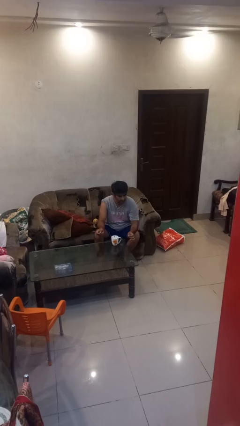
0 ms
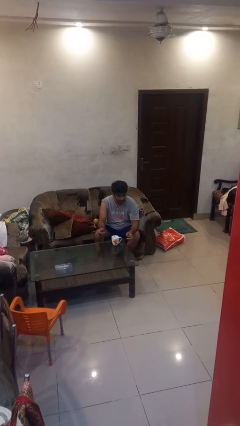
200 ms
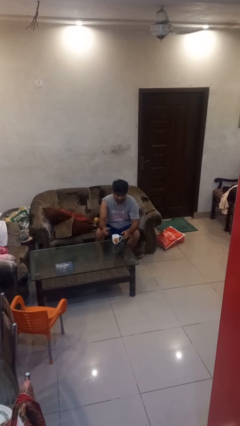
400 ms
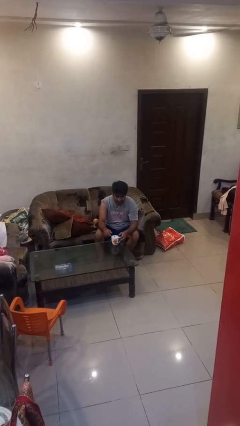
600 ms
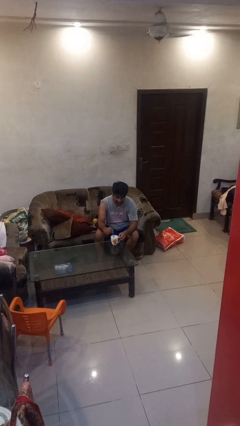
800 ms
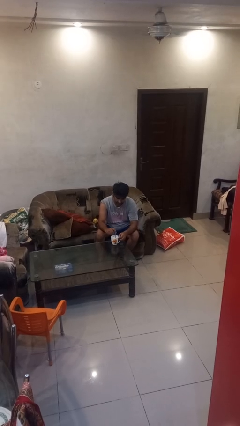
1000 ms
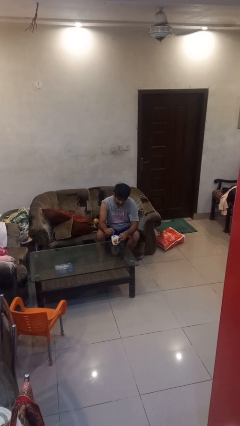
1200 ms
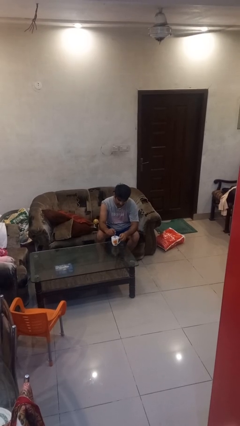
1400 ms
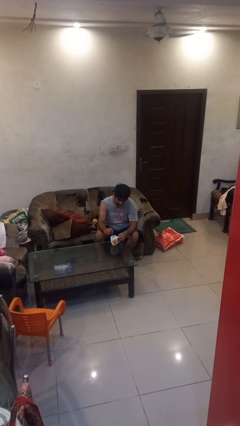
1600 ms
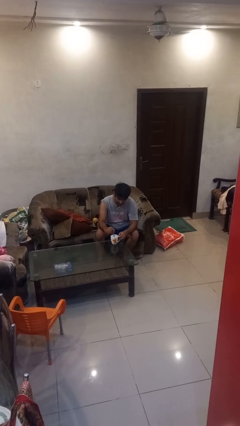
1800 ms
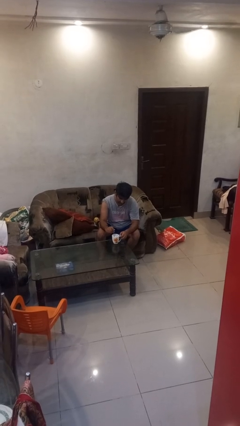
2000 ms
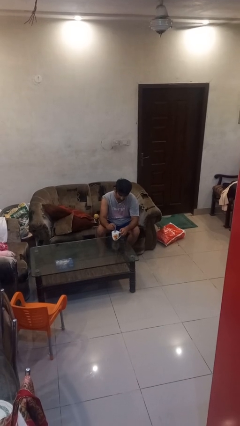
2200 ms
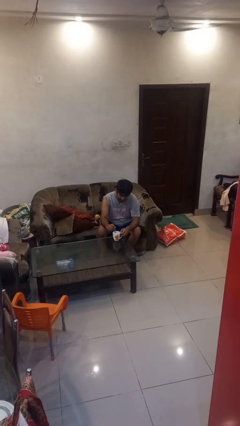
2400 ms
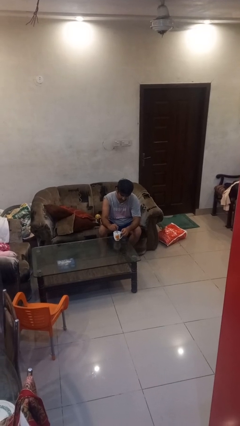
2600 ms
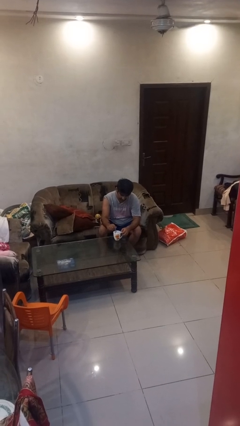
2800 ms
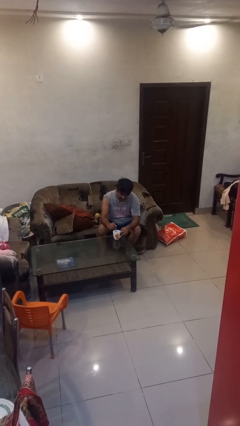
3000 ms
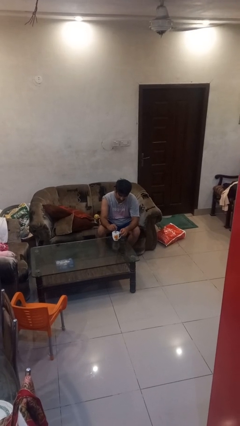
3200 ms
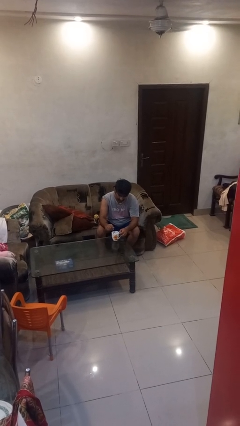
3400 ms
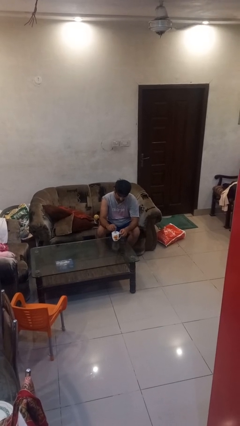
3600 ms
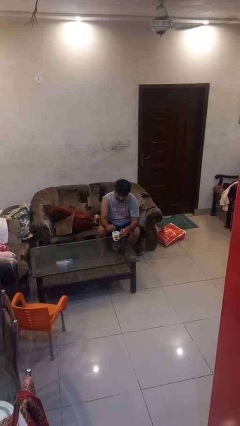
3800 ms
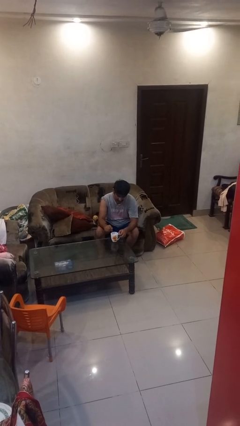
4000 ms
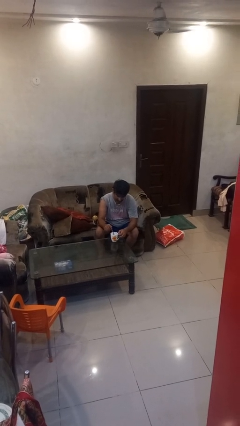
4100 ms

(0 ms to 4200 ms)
person stirs mug

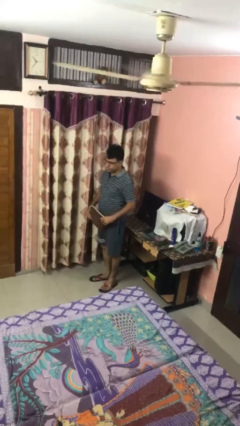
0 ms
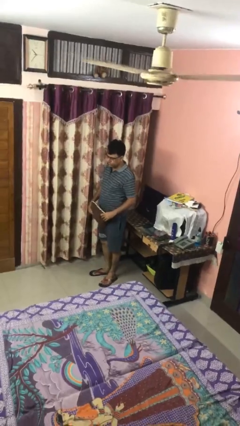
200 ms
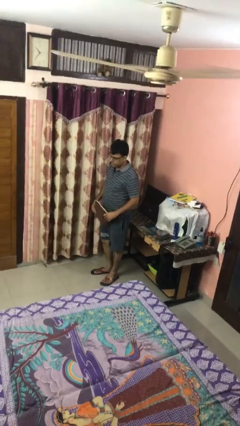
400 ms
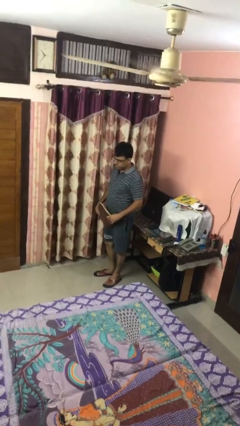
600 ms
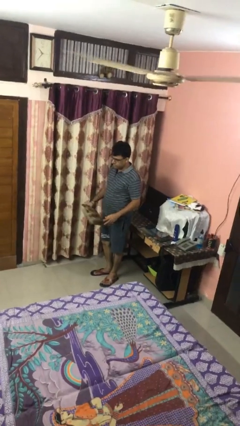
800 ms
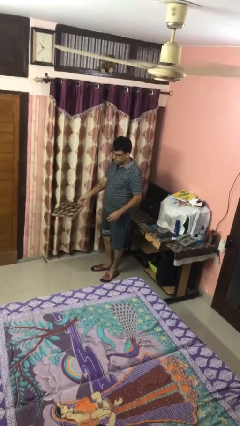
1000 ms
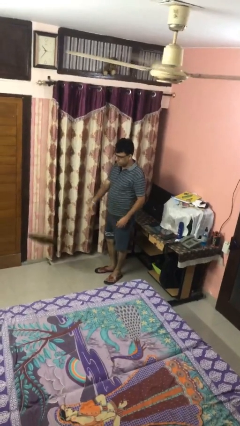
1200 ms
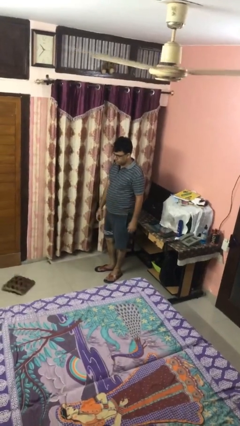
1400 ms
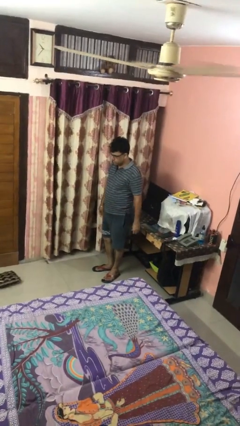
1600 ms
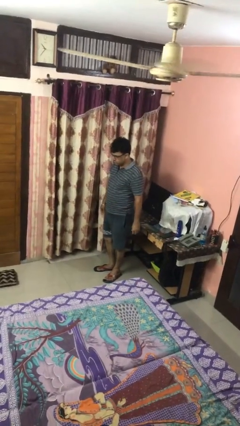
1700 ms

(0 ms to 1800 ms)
person throws object to ground

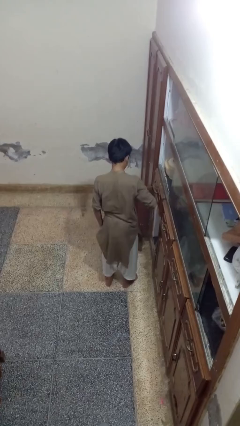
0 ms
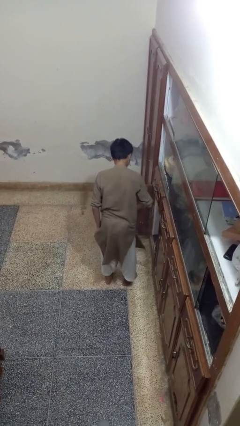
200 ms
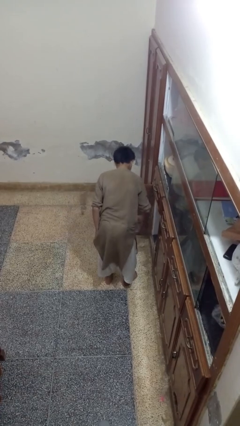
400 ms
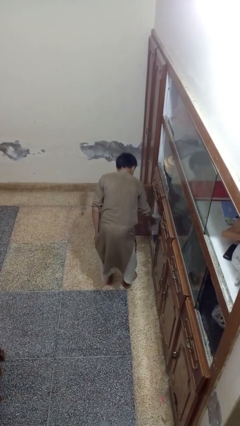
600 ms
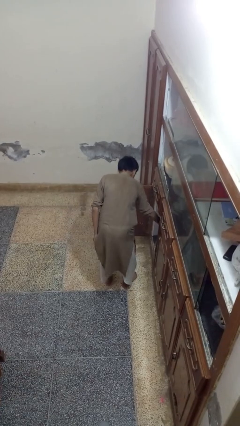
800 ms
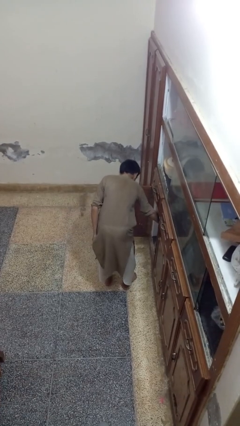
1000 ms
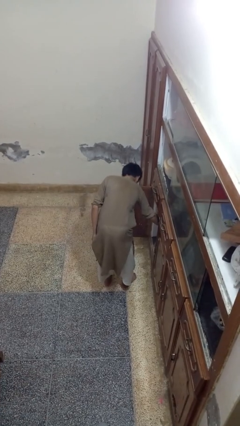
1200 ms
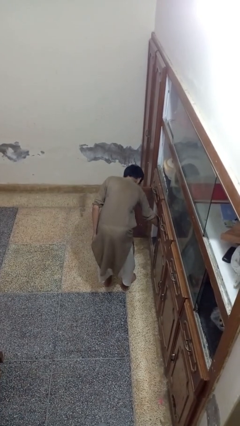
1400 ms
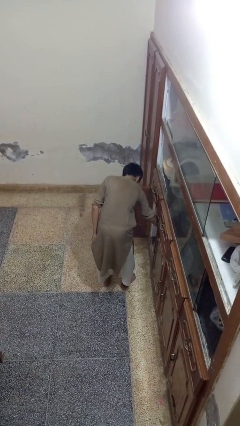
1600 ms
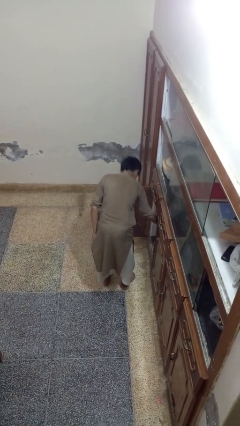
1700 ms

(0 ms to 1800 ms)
person puts object in cabinet

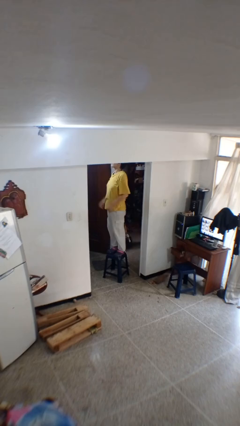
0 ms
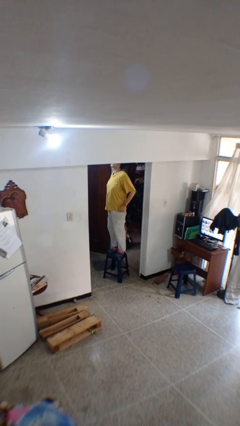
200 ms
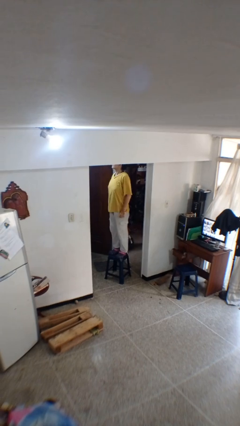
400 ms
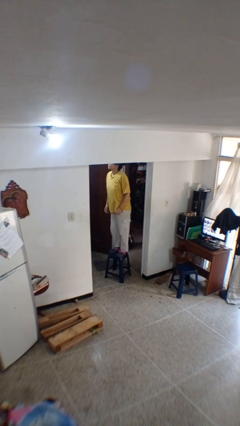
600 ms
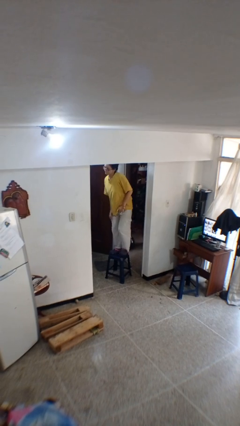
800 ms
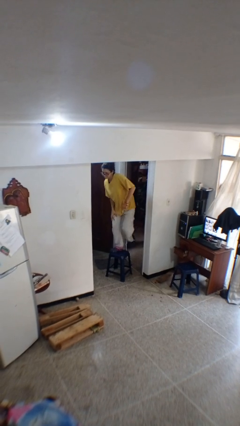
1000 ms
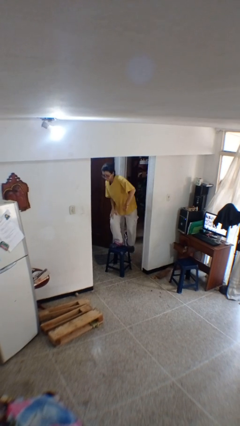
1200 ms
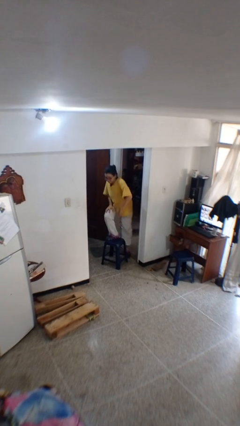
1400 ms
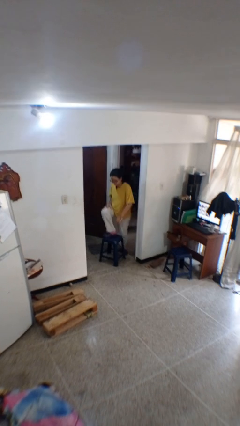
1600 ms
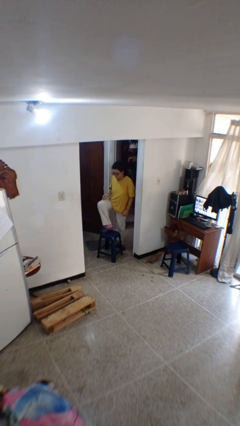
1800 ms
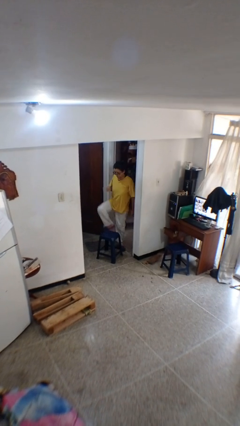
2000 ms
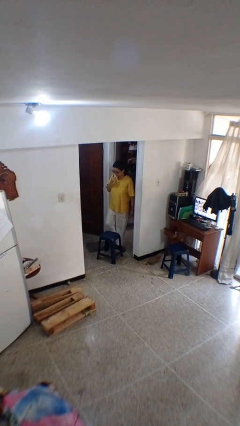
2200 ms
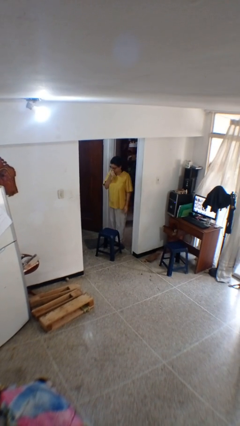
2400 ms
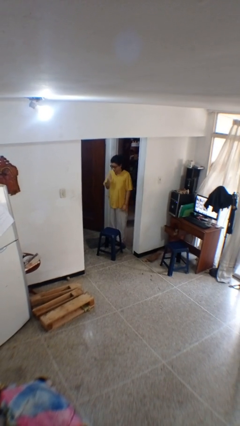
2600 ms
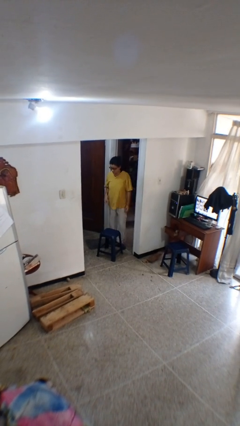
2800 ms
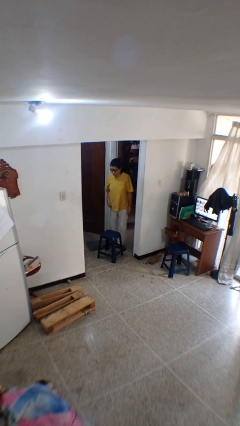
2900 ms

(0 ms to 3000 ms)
person climbs off chair

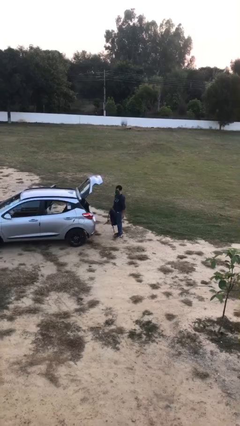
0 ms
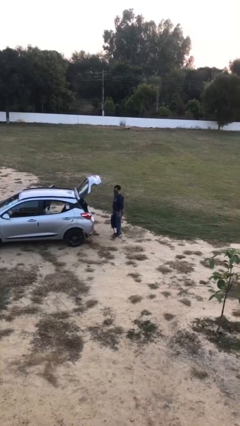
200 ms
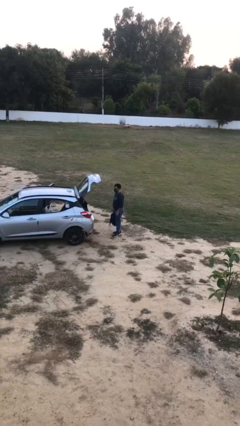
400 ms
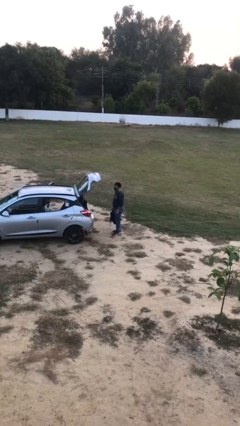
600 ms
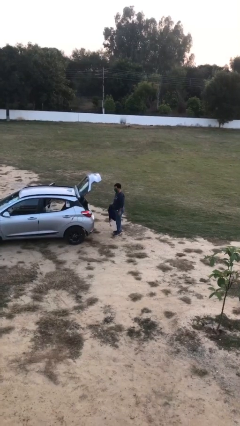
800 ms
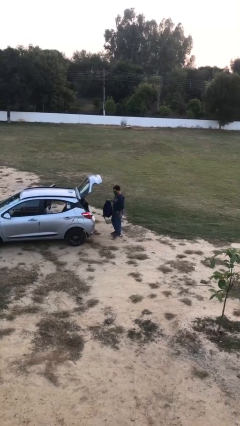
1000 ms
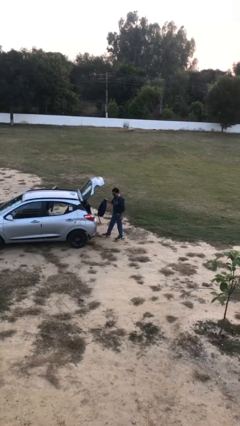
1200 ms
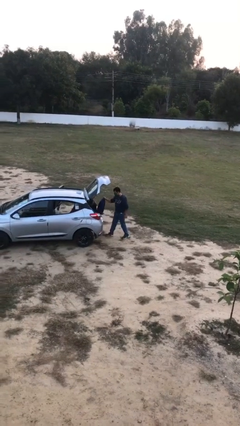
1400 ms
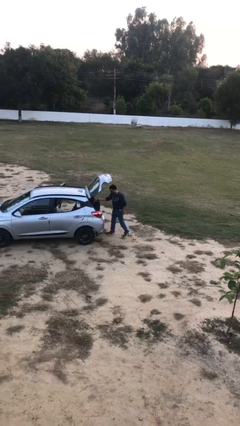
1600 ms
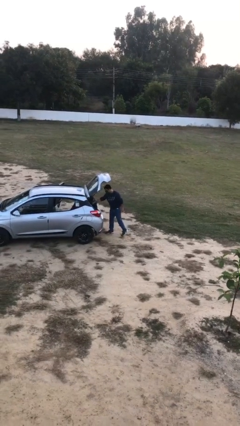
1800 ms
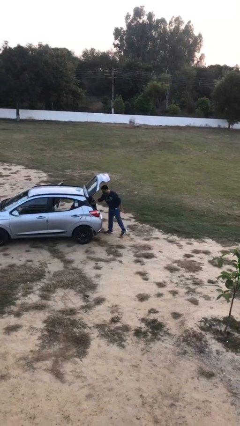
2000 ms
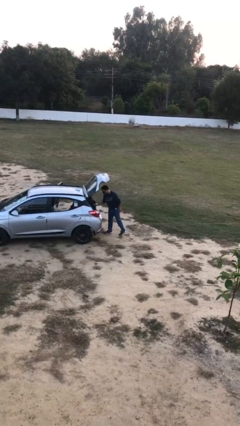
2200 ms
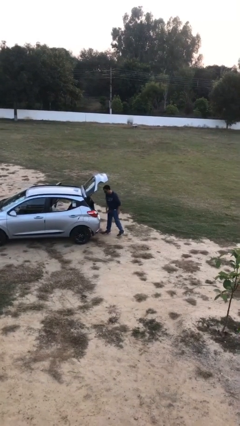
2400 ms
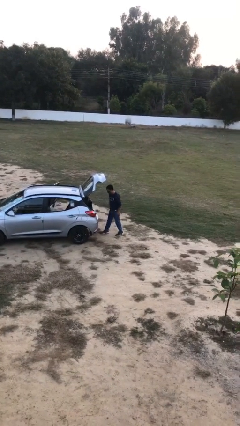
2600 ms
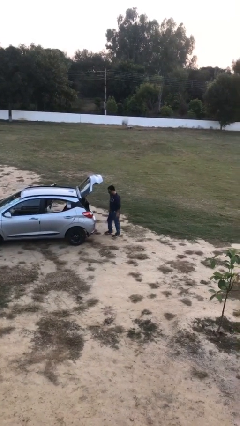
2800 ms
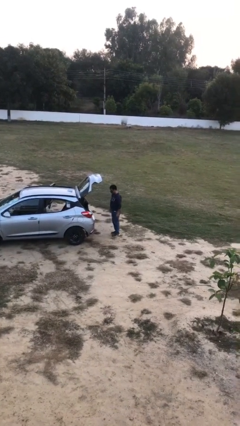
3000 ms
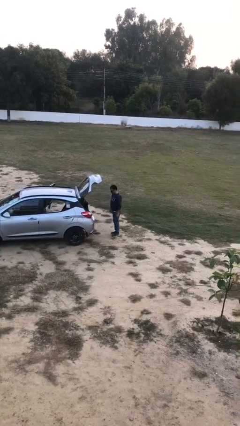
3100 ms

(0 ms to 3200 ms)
person loads car

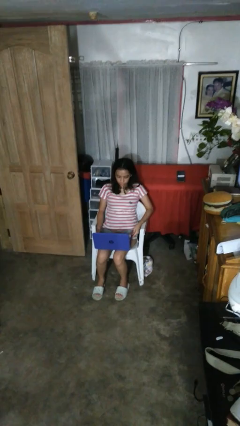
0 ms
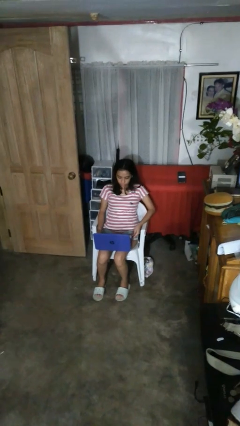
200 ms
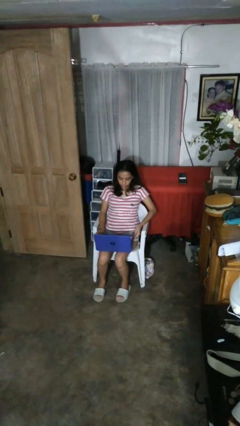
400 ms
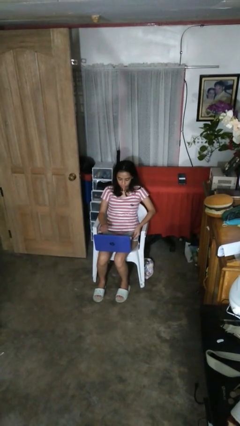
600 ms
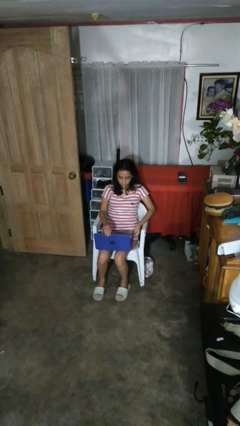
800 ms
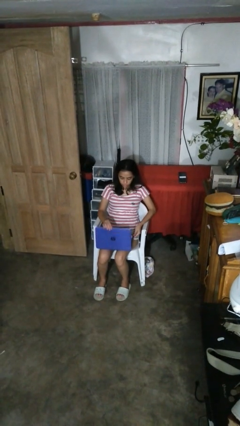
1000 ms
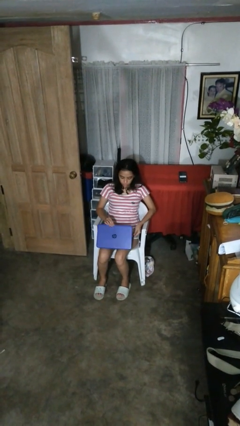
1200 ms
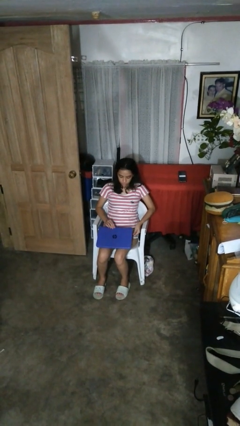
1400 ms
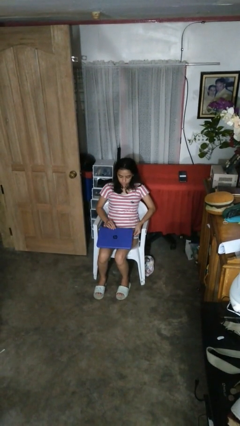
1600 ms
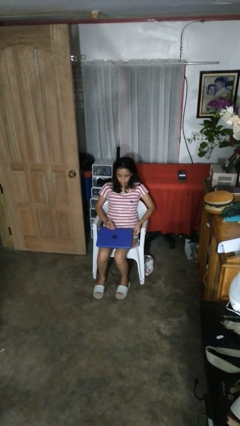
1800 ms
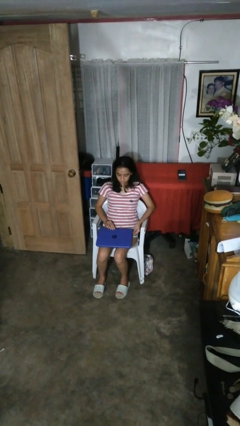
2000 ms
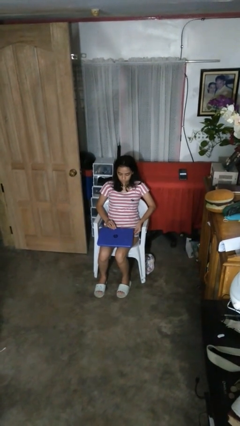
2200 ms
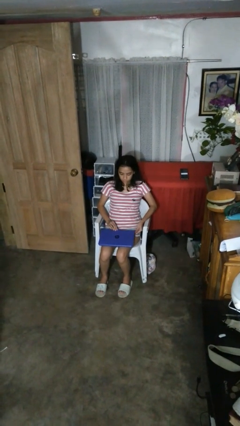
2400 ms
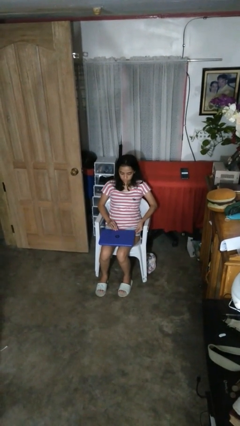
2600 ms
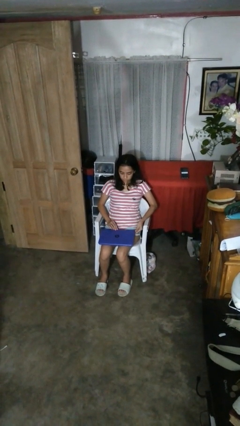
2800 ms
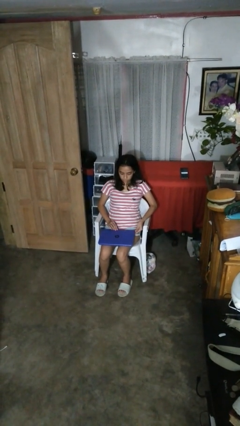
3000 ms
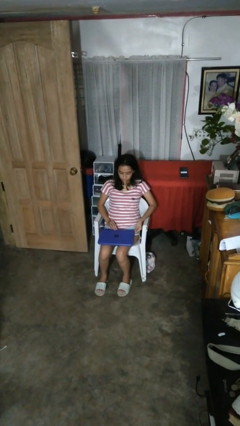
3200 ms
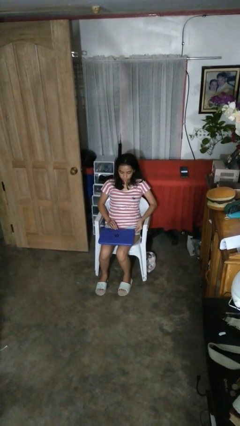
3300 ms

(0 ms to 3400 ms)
person closes laptop
